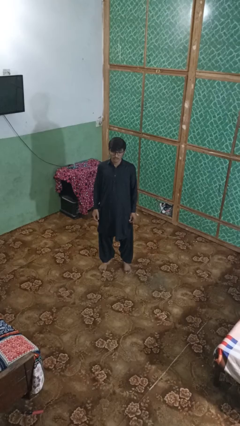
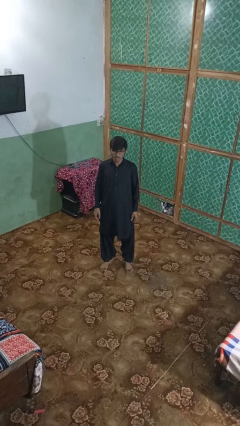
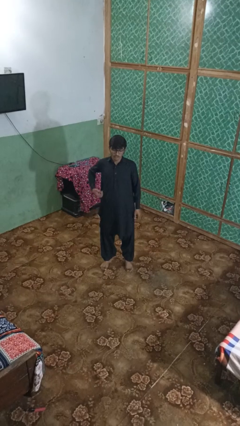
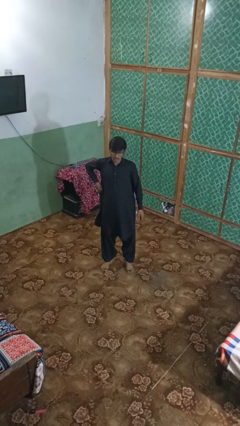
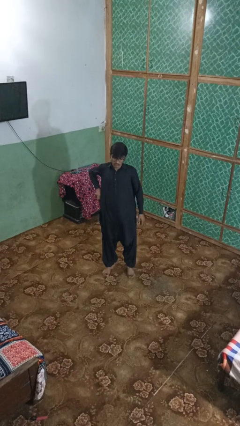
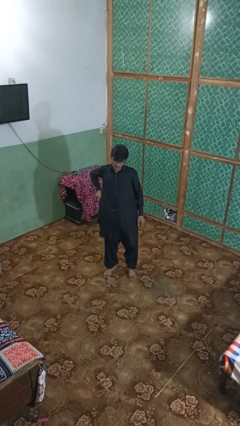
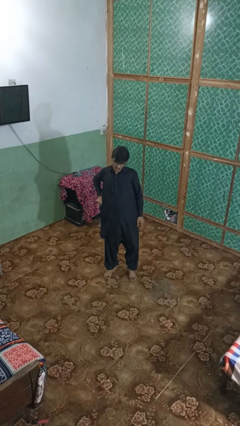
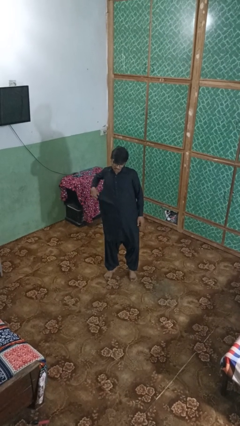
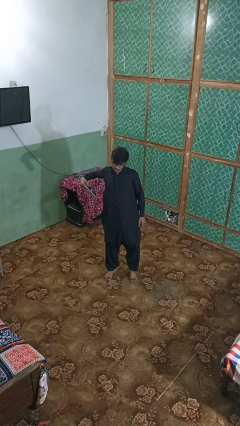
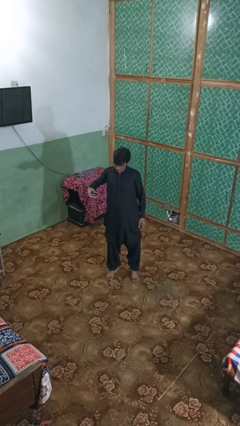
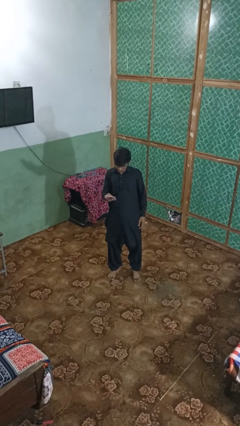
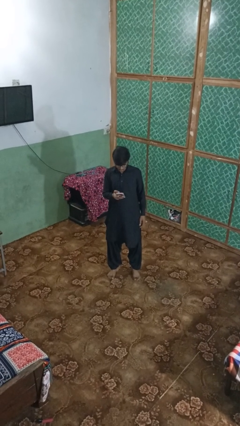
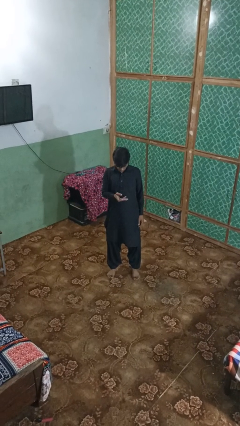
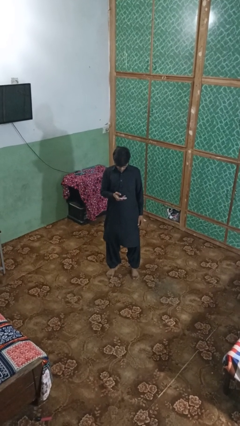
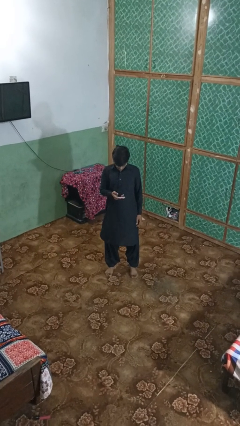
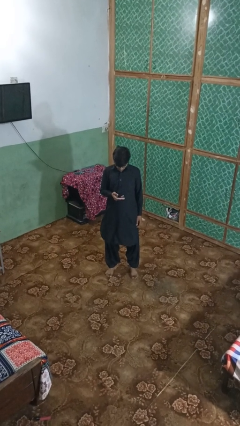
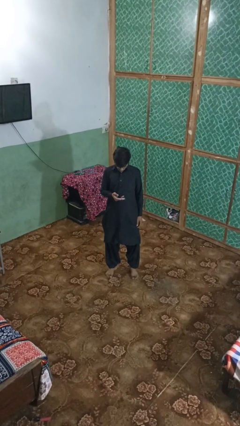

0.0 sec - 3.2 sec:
person takes phone from pocket

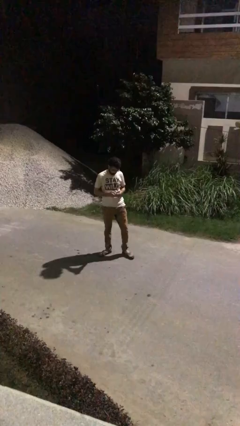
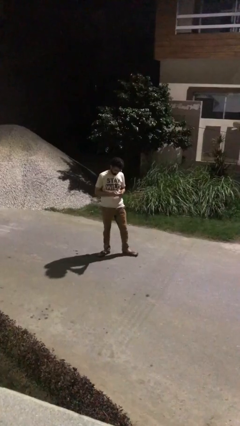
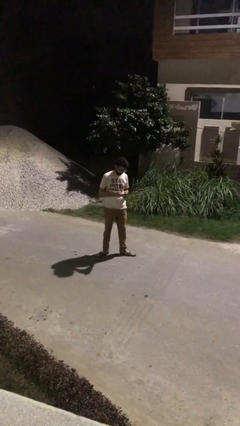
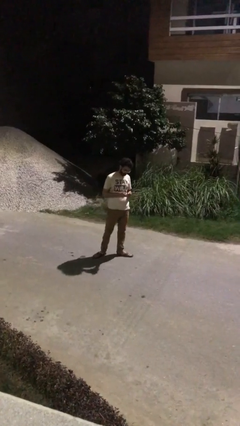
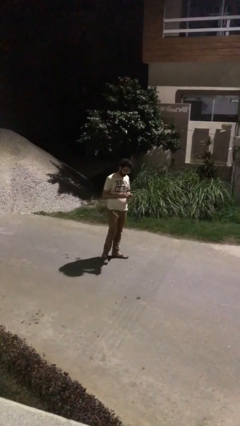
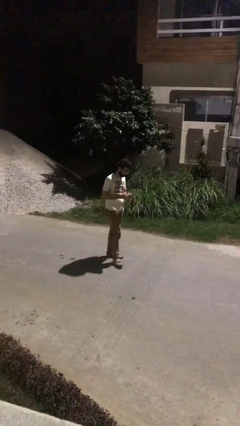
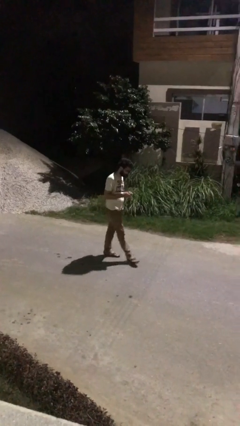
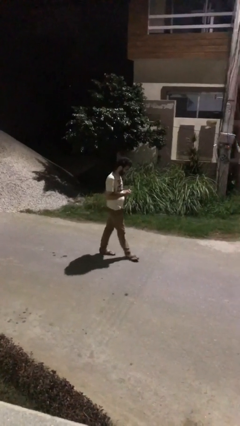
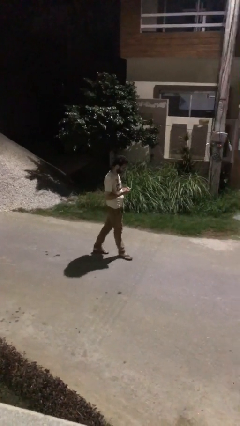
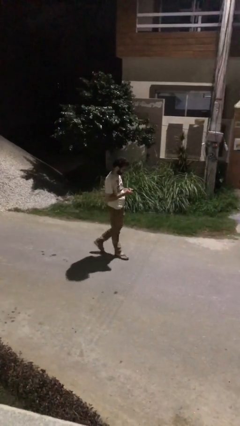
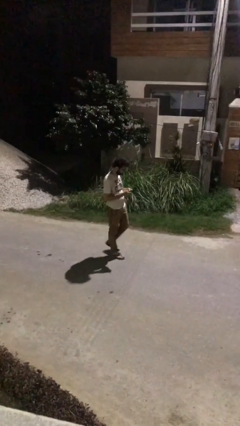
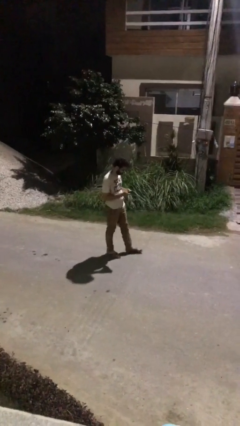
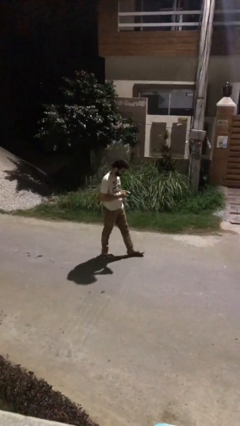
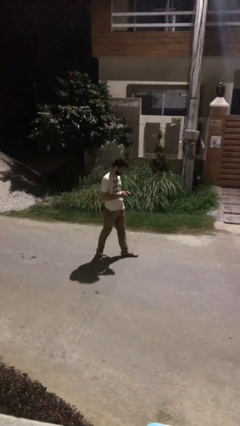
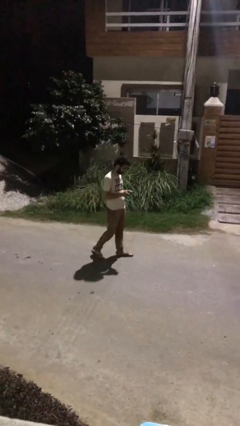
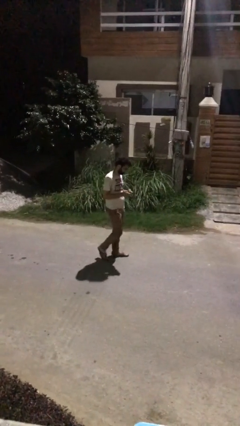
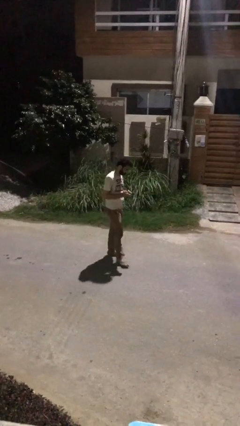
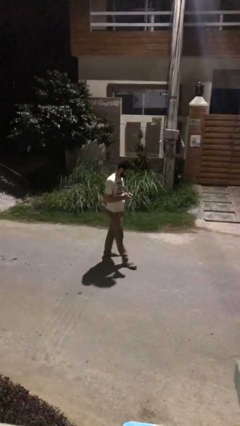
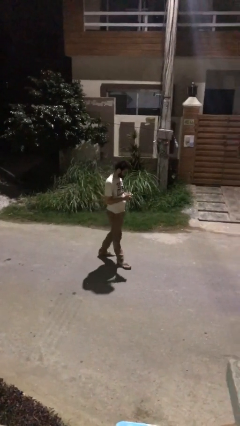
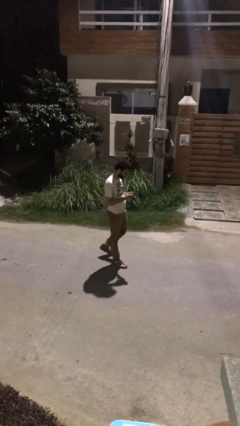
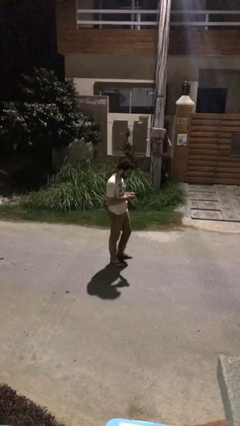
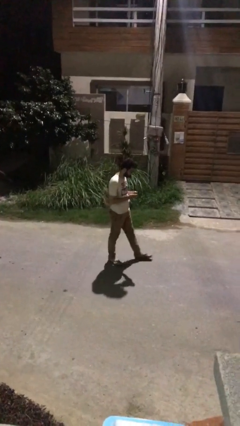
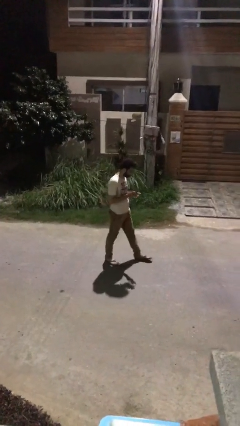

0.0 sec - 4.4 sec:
person texts on phone

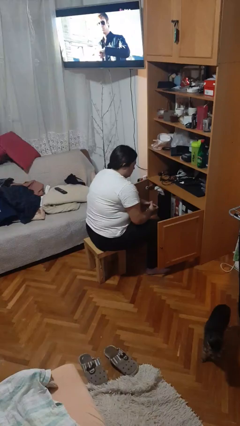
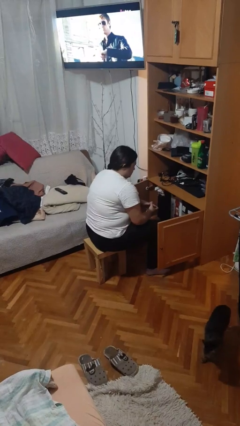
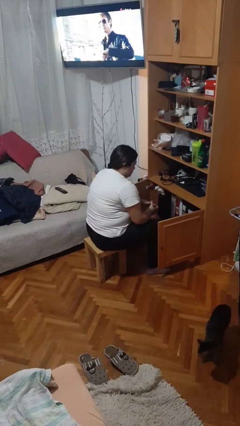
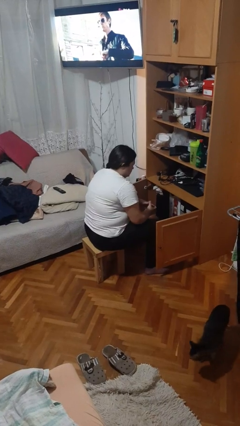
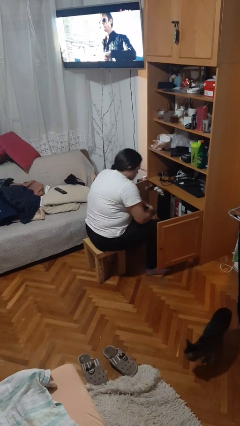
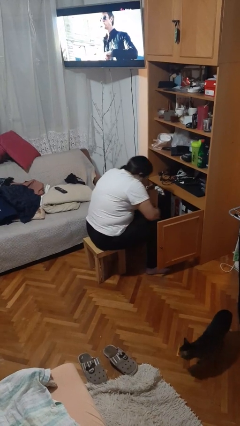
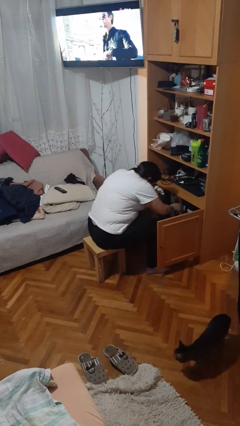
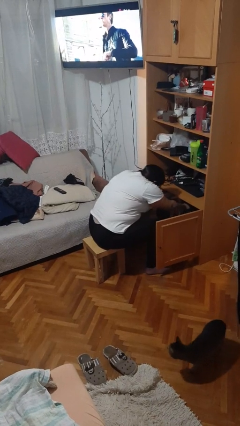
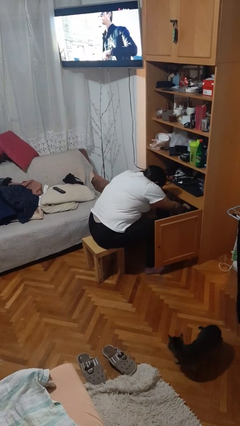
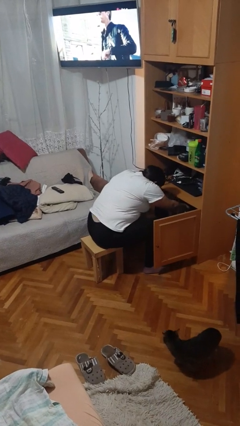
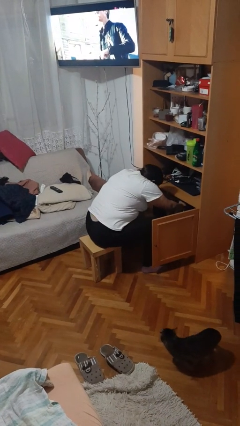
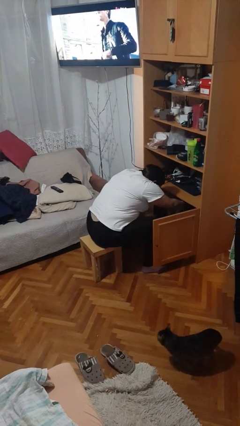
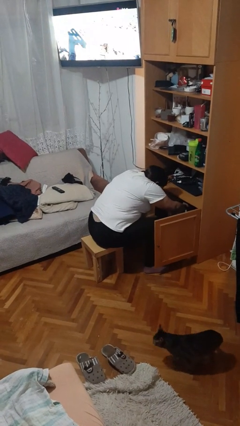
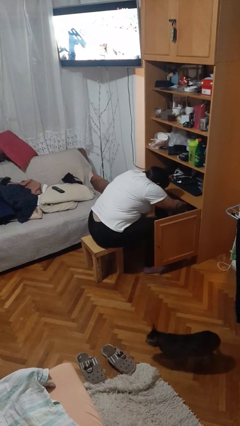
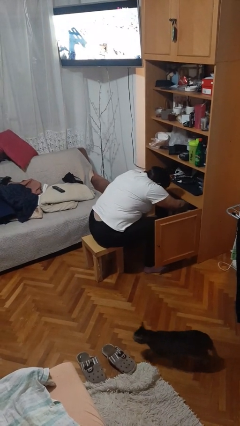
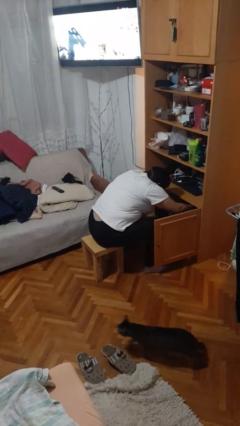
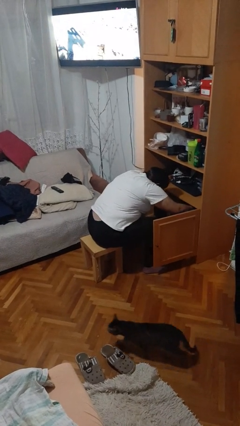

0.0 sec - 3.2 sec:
person searches in cabinet

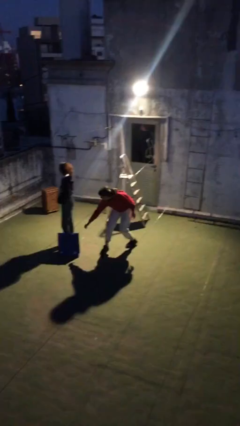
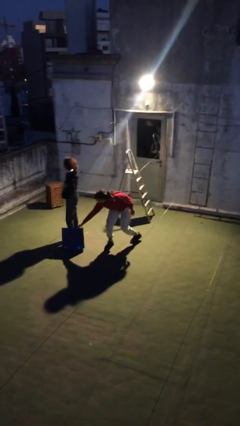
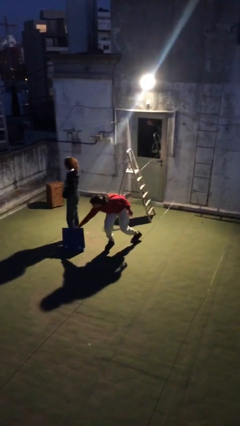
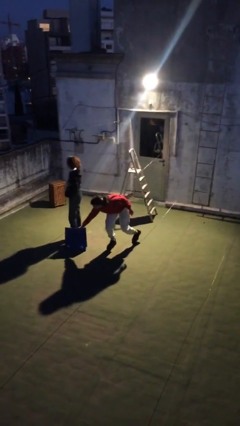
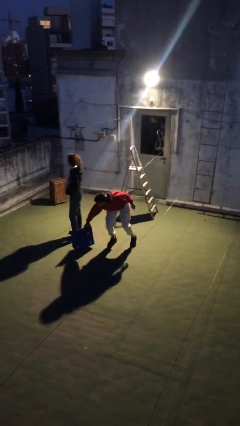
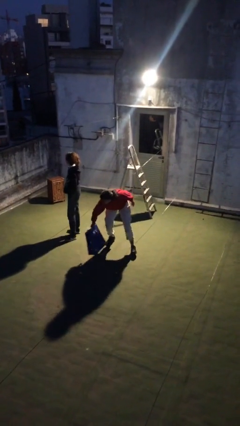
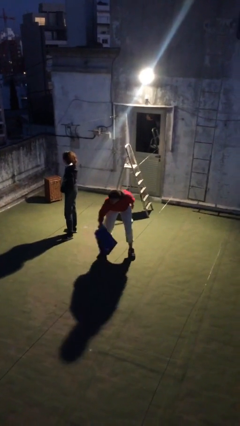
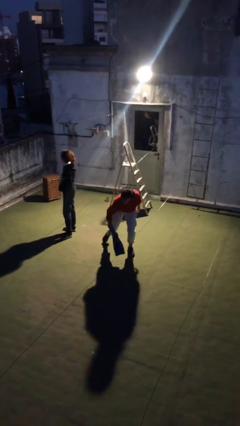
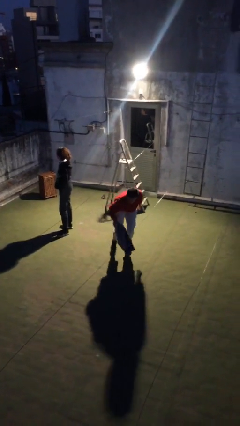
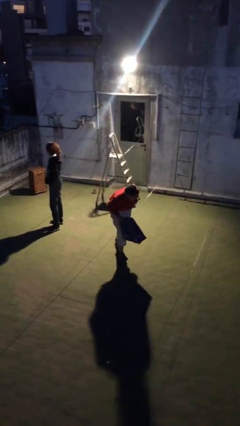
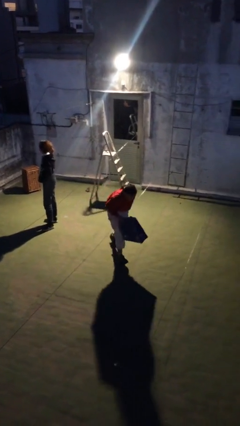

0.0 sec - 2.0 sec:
person steals object from person

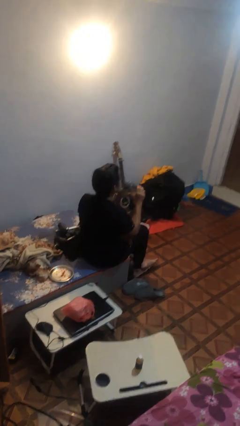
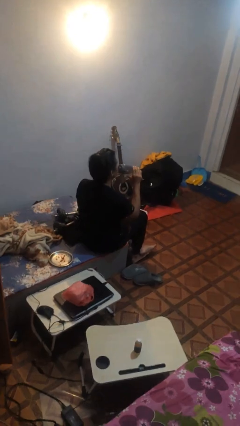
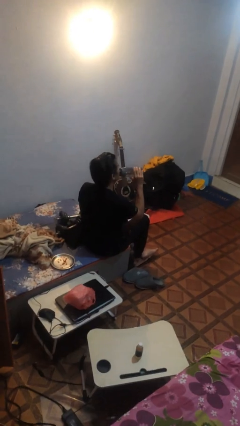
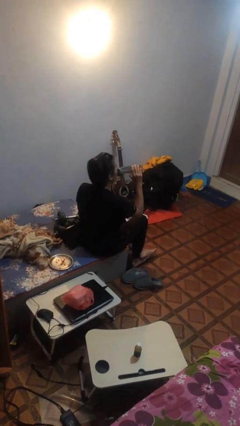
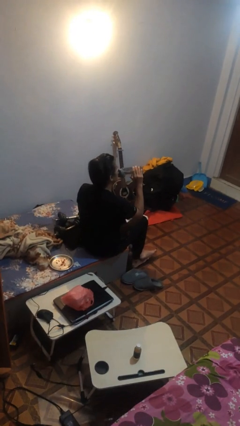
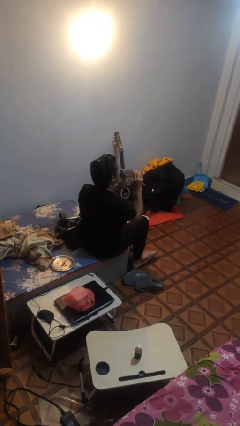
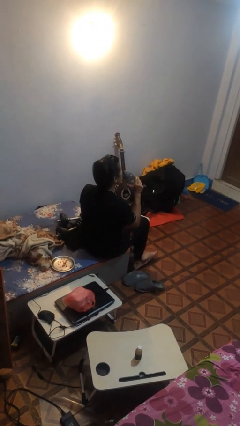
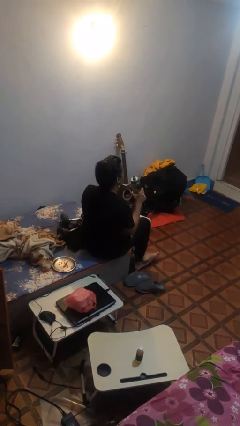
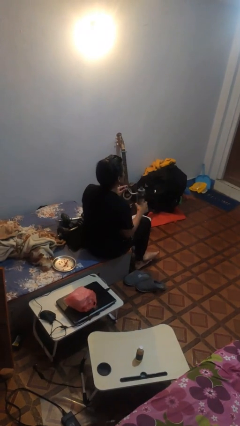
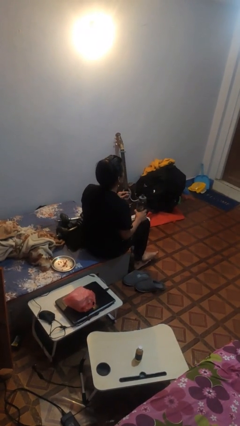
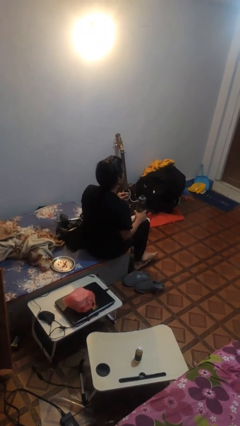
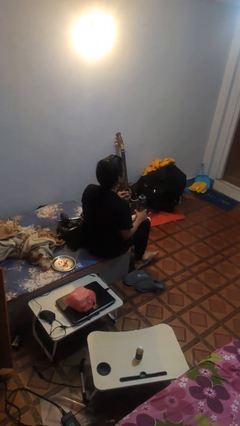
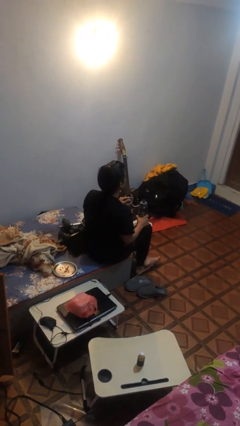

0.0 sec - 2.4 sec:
person drinks from bottle

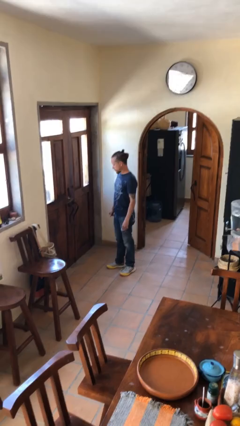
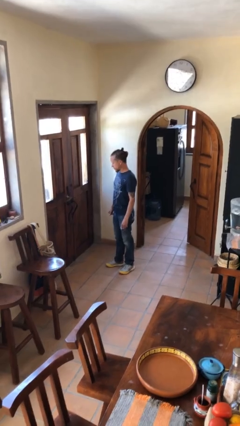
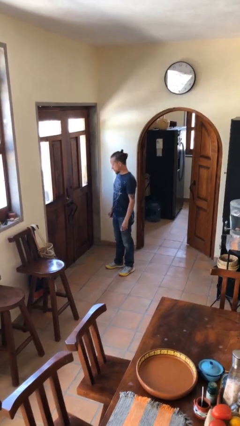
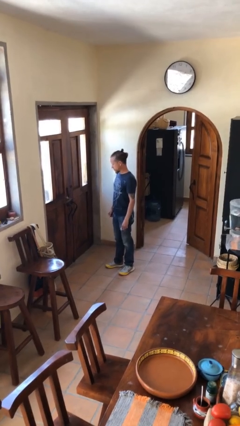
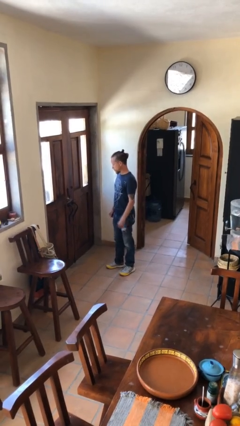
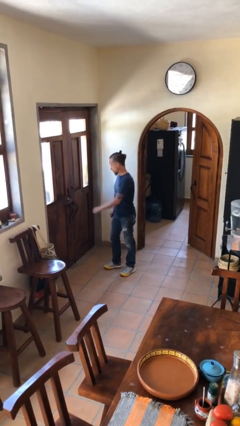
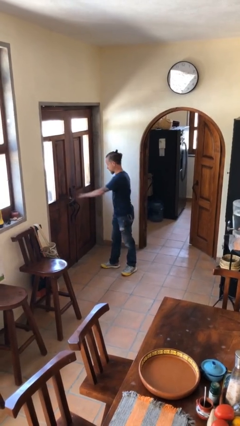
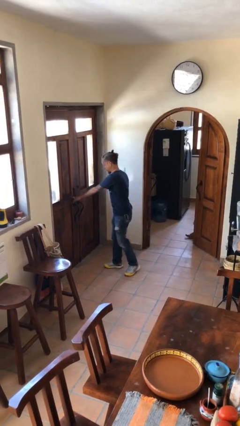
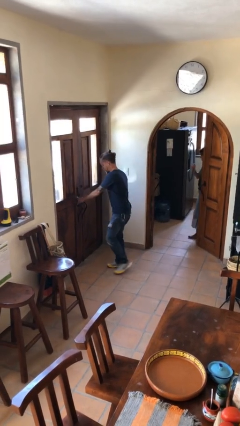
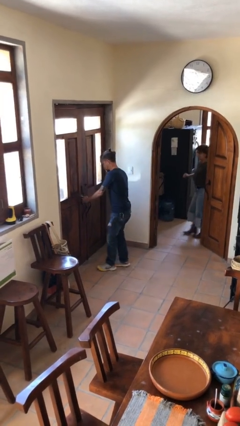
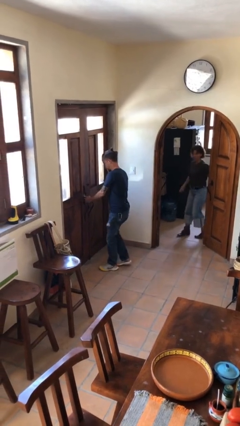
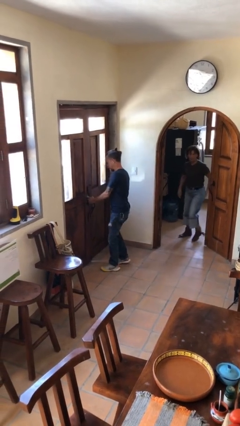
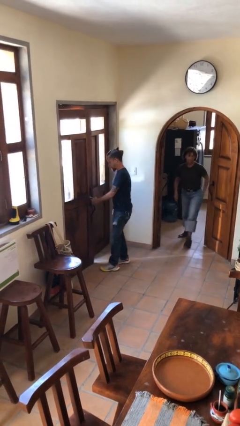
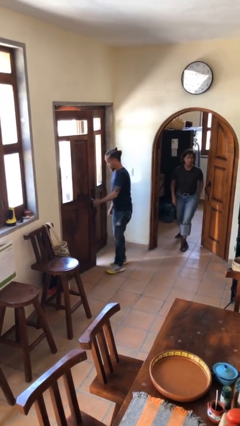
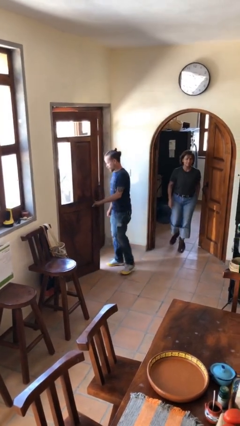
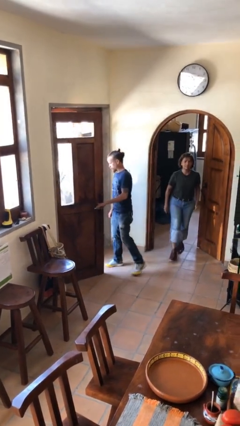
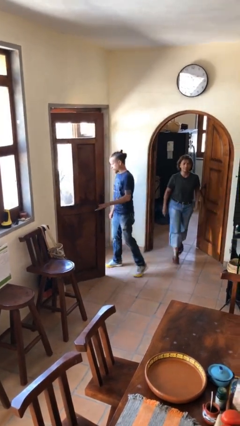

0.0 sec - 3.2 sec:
person opens facility door
